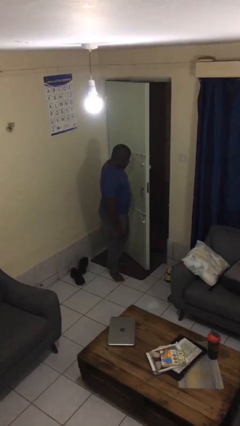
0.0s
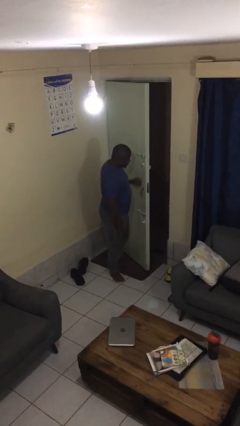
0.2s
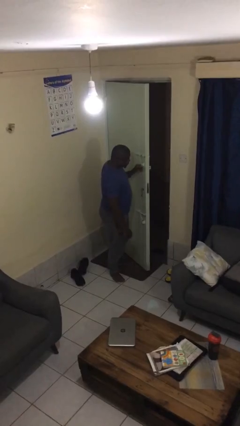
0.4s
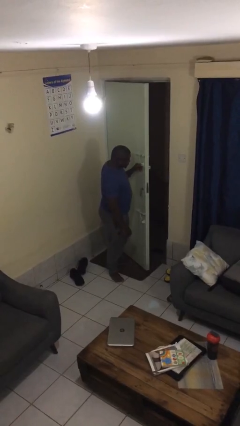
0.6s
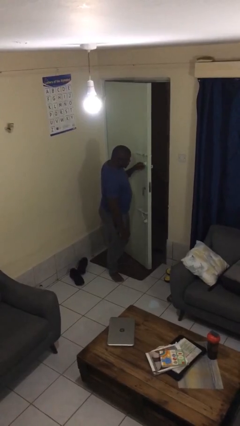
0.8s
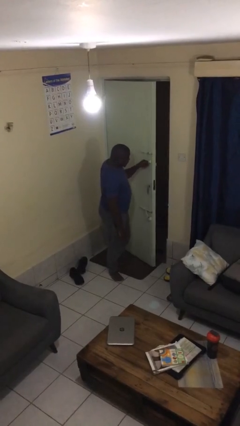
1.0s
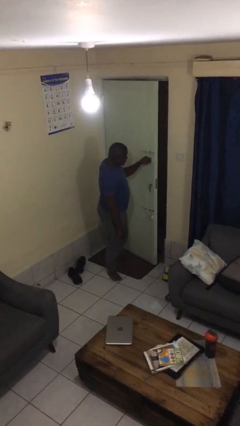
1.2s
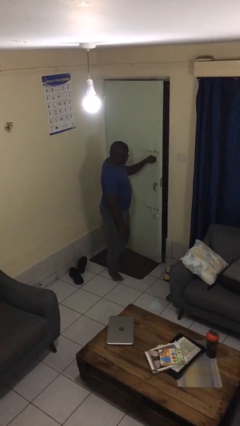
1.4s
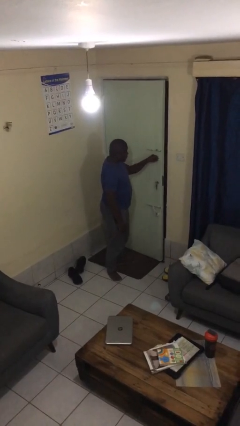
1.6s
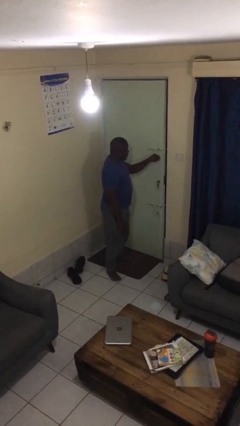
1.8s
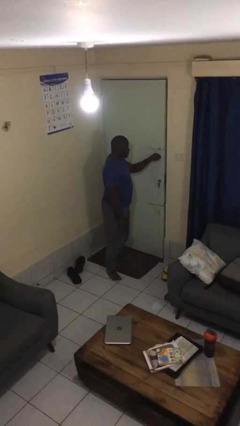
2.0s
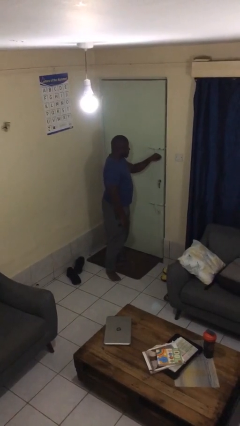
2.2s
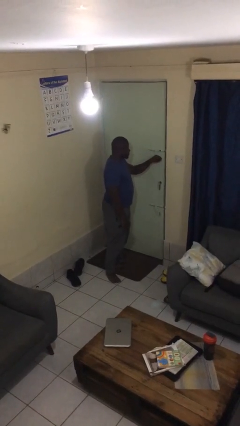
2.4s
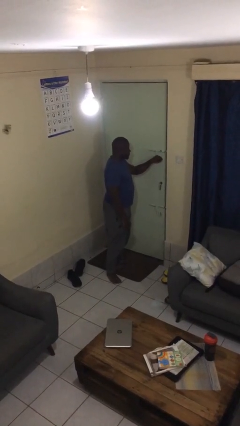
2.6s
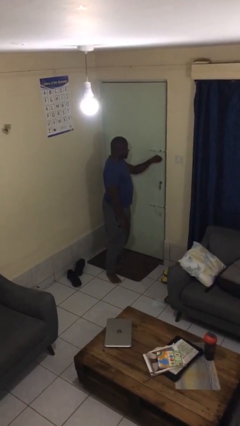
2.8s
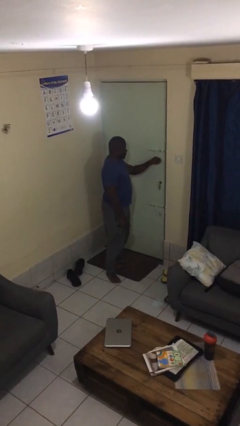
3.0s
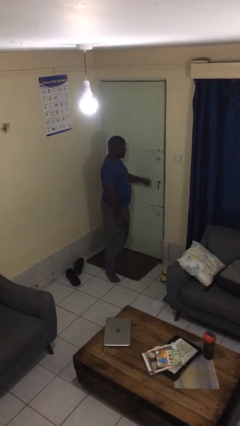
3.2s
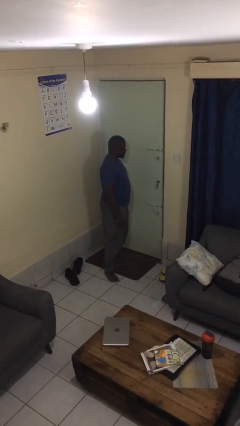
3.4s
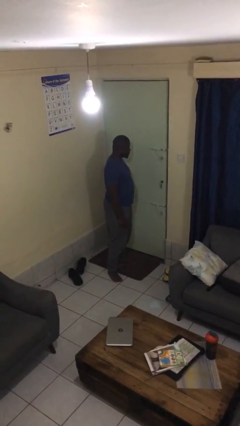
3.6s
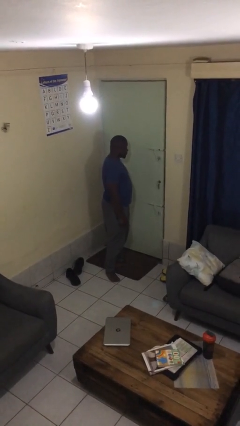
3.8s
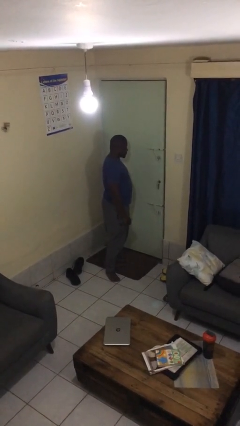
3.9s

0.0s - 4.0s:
person closes facility door

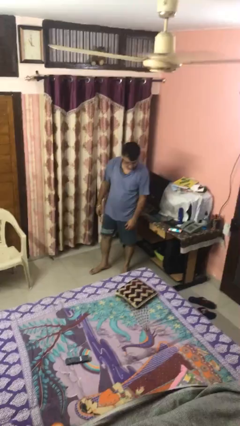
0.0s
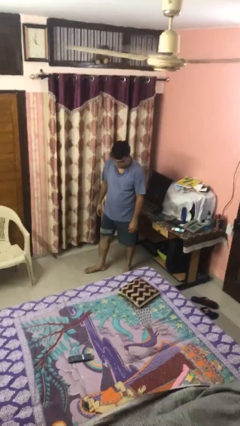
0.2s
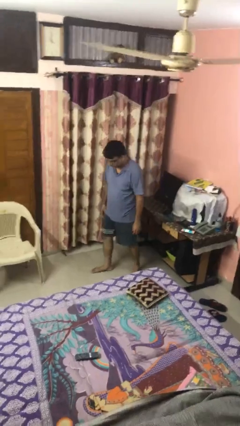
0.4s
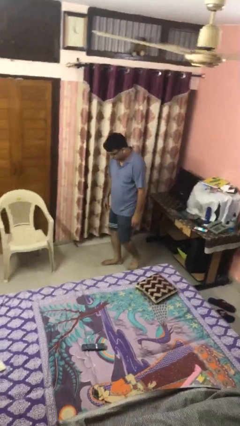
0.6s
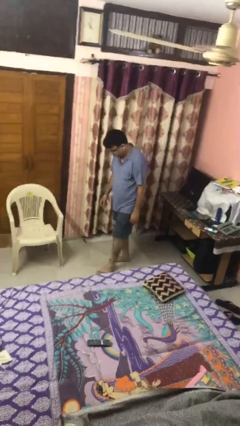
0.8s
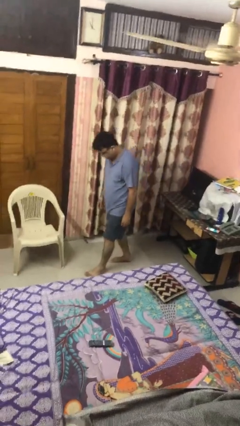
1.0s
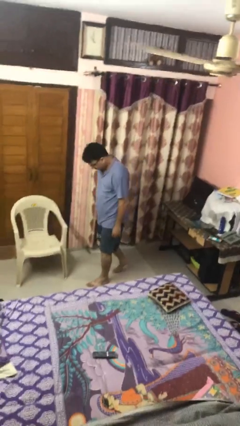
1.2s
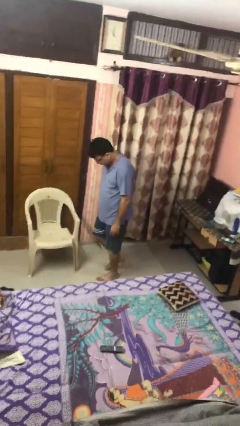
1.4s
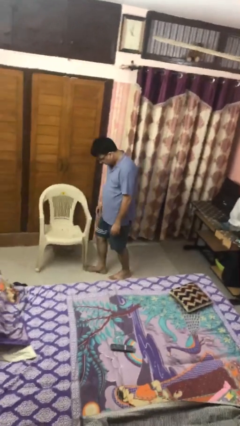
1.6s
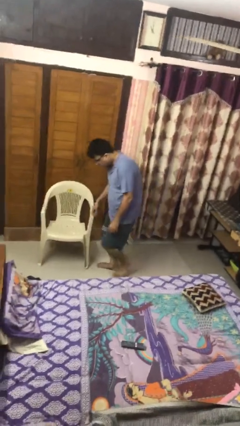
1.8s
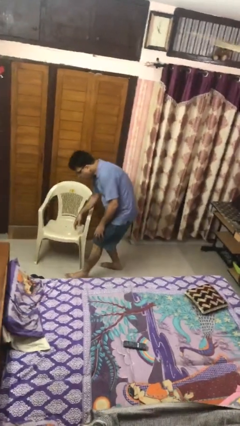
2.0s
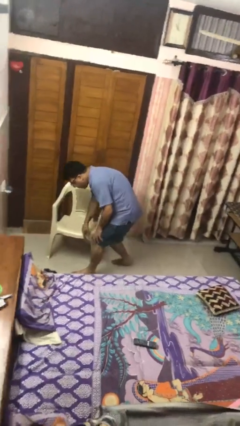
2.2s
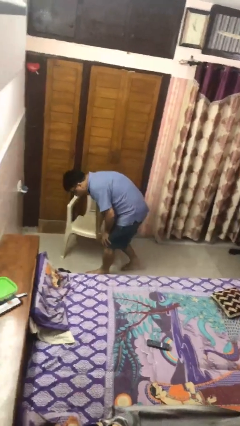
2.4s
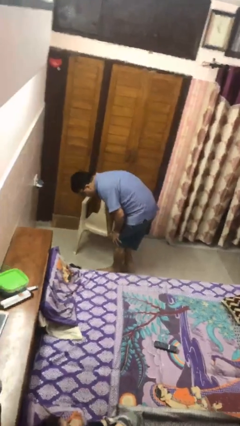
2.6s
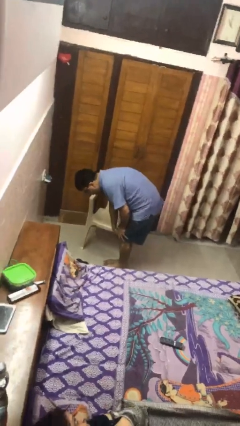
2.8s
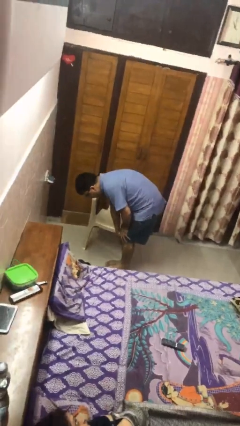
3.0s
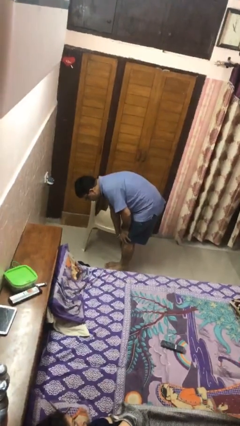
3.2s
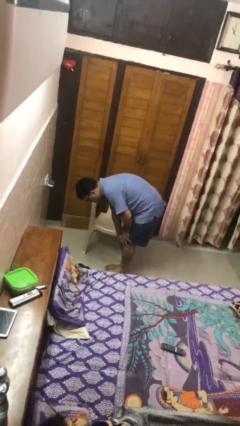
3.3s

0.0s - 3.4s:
person stubs toe

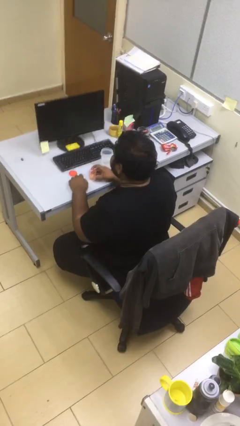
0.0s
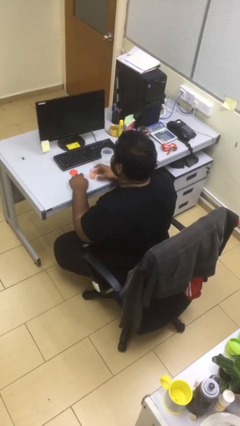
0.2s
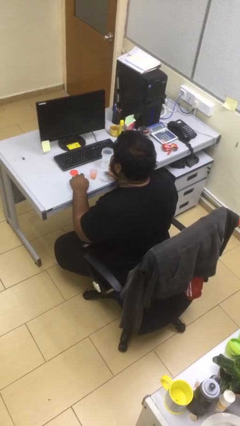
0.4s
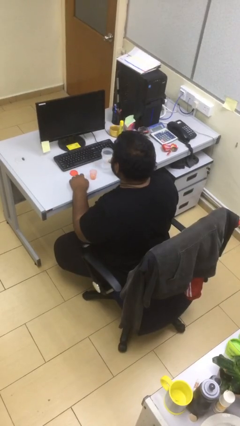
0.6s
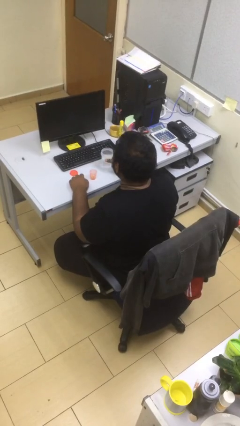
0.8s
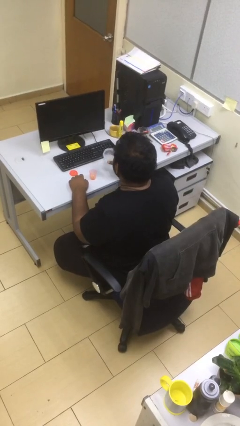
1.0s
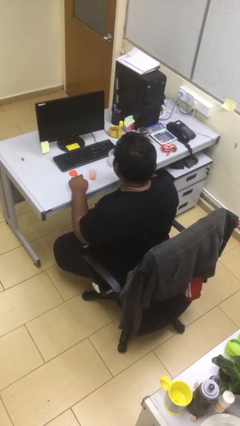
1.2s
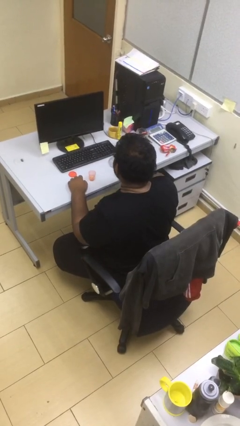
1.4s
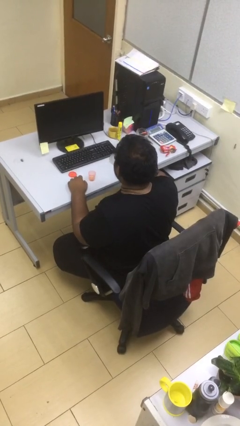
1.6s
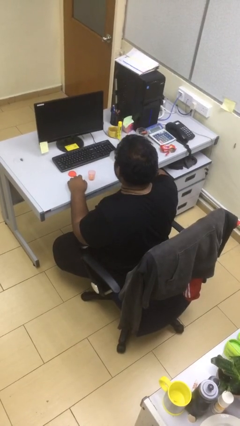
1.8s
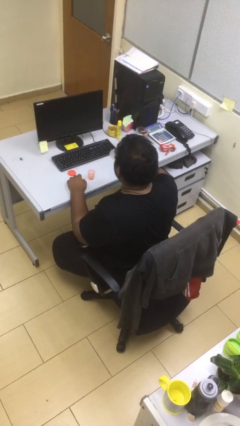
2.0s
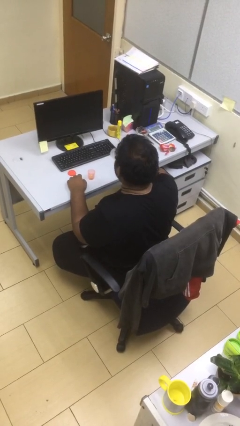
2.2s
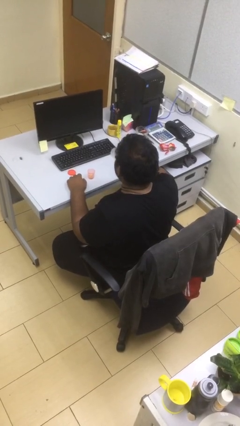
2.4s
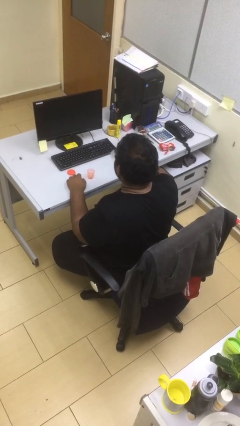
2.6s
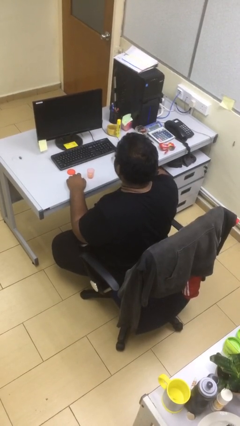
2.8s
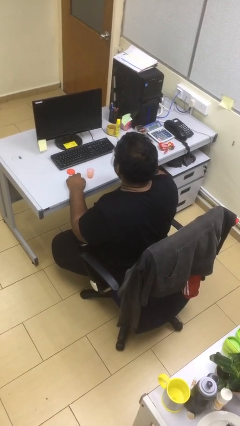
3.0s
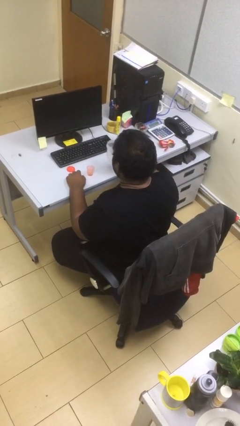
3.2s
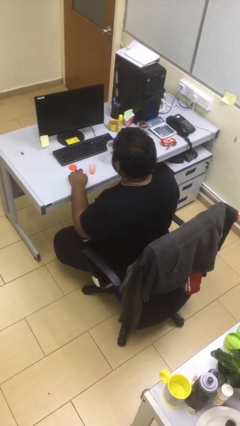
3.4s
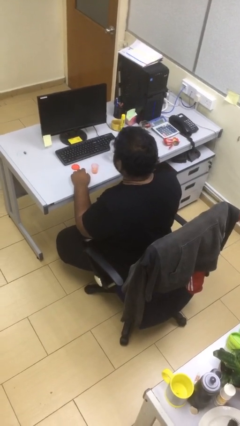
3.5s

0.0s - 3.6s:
person drinks from cup

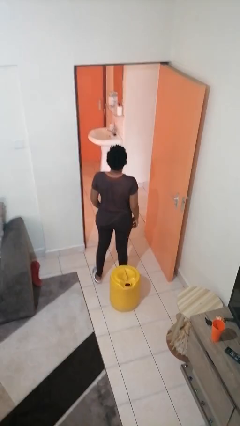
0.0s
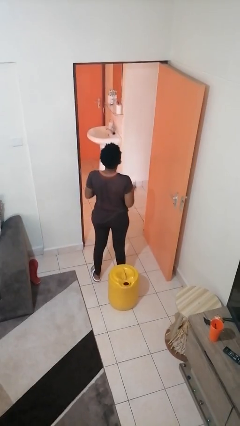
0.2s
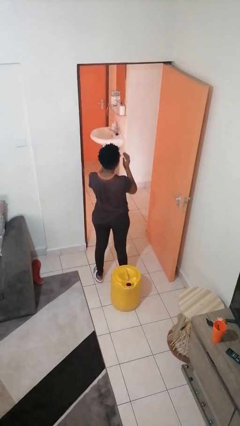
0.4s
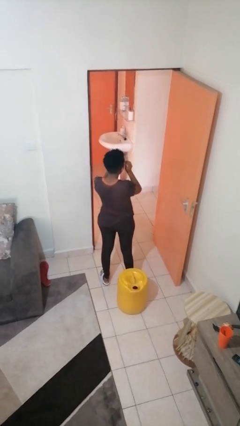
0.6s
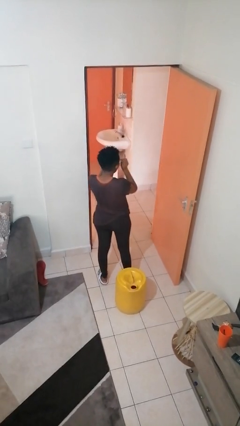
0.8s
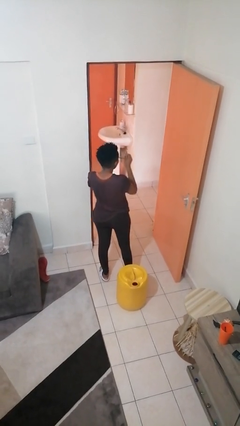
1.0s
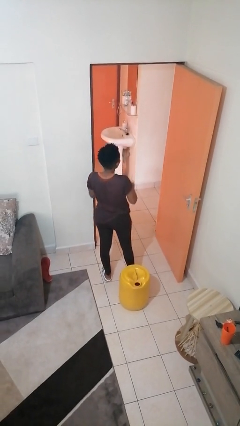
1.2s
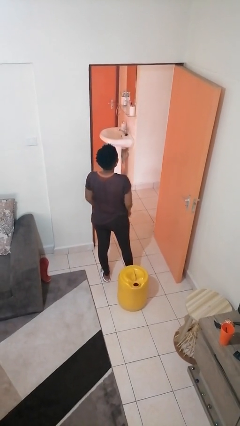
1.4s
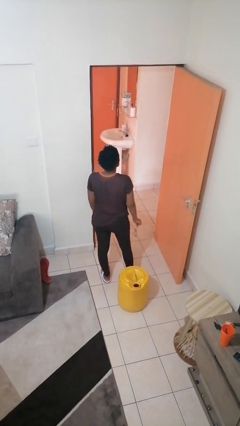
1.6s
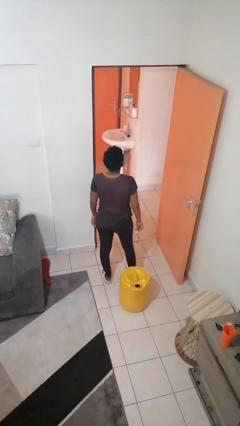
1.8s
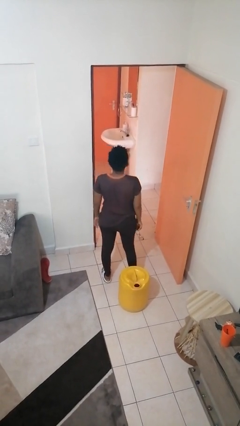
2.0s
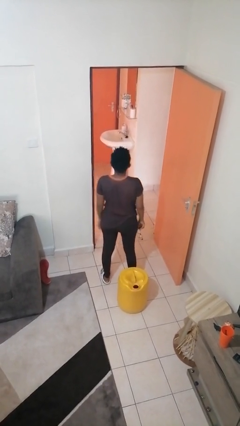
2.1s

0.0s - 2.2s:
person takes off glasses

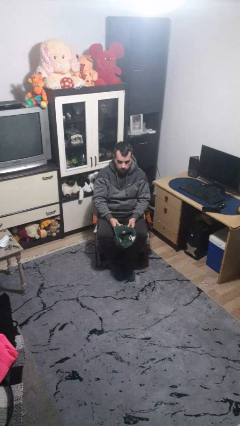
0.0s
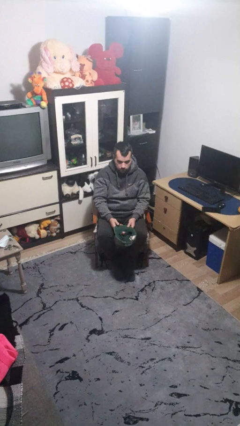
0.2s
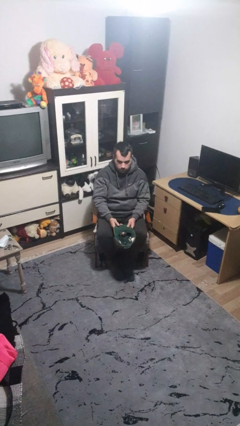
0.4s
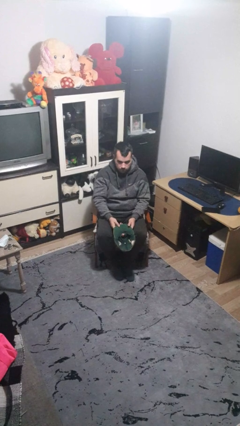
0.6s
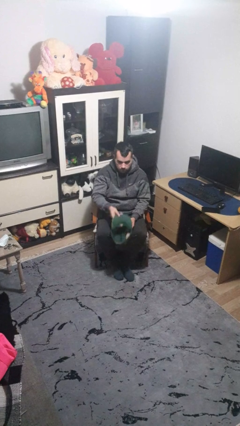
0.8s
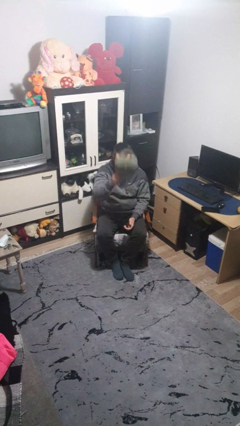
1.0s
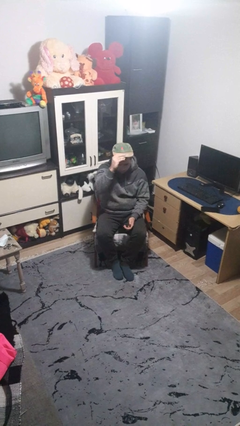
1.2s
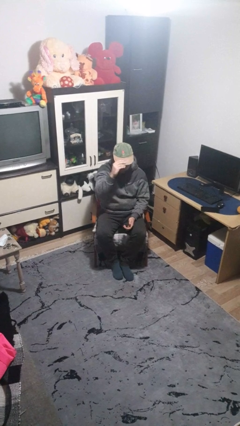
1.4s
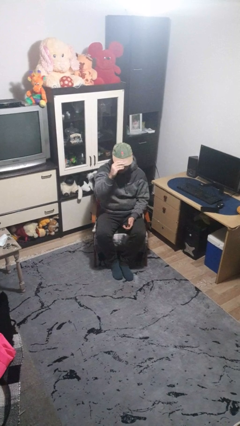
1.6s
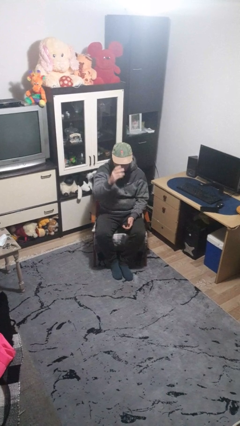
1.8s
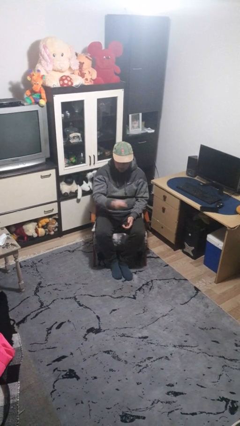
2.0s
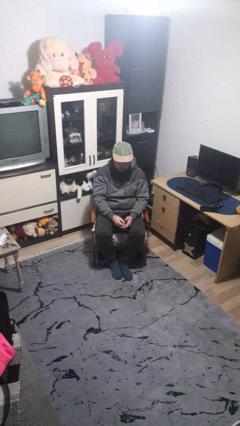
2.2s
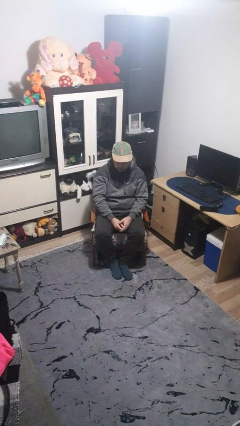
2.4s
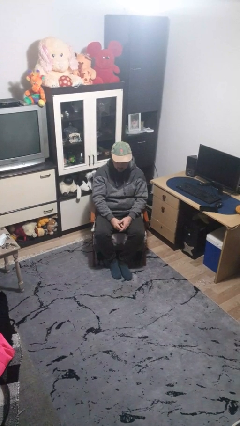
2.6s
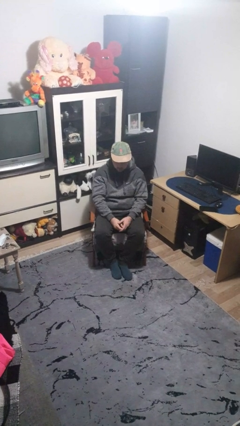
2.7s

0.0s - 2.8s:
person puts on hat

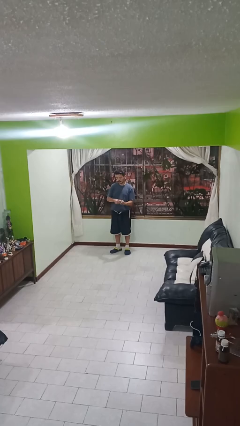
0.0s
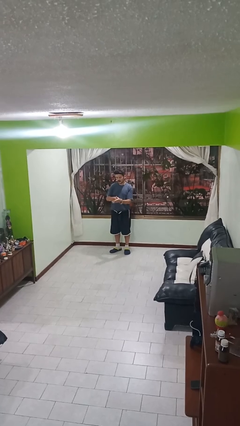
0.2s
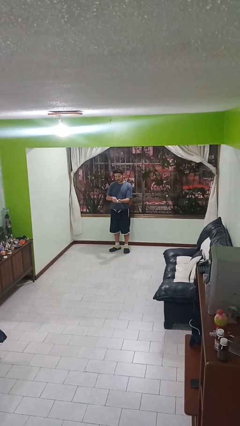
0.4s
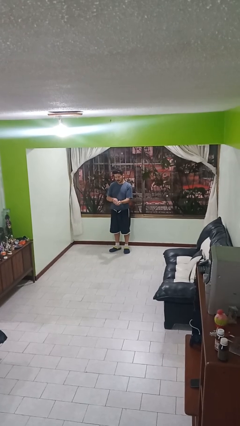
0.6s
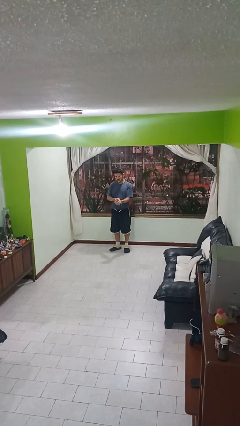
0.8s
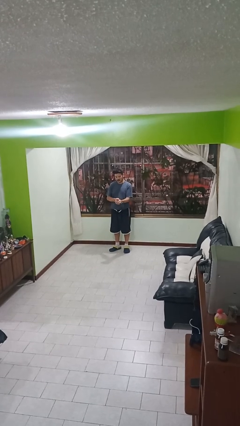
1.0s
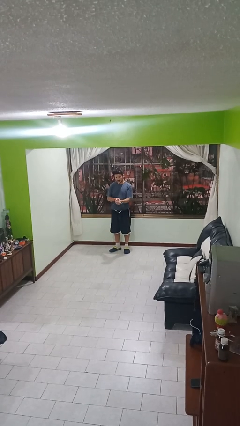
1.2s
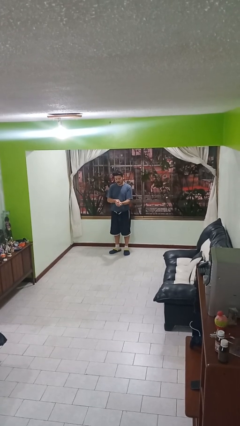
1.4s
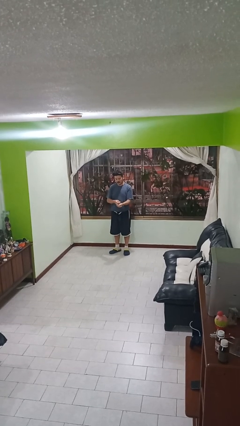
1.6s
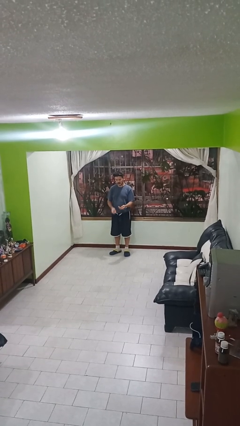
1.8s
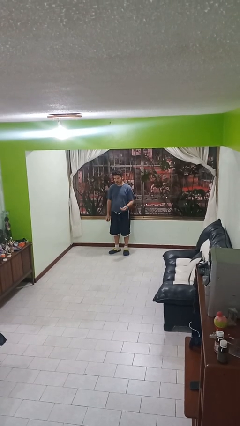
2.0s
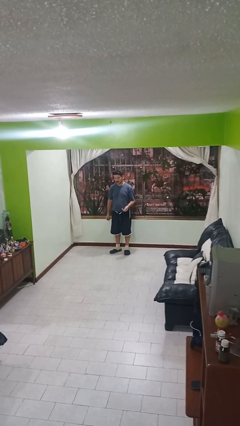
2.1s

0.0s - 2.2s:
person puts on wristwatch
